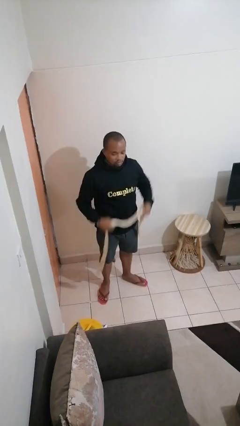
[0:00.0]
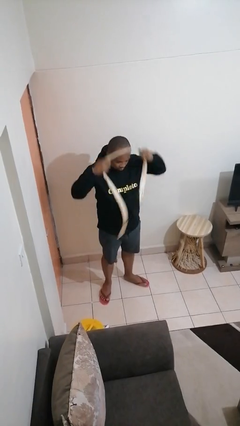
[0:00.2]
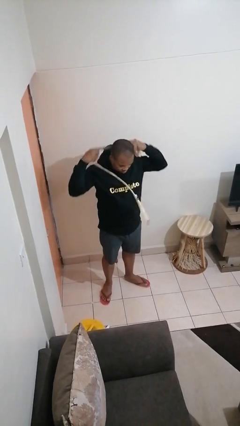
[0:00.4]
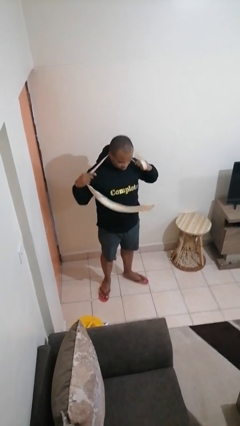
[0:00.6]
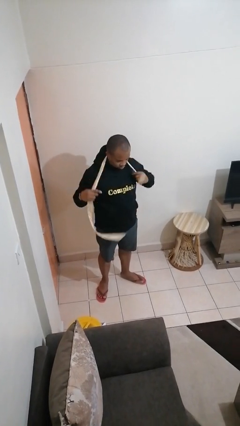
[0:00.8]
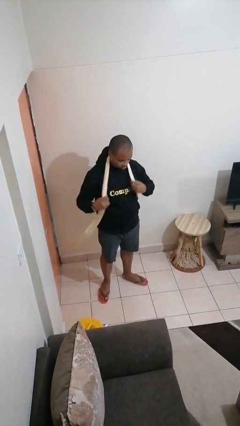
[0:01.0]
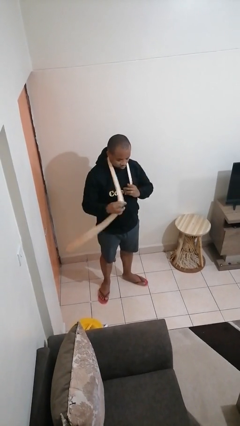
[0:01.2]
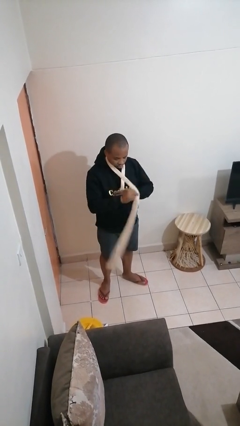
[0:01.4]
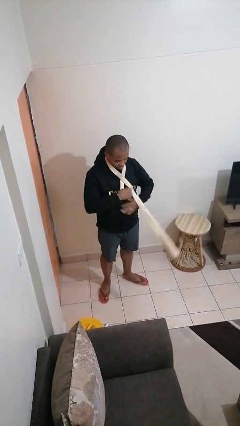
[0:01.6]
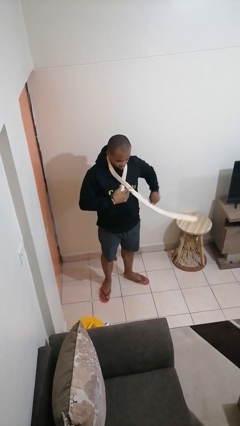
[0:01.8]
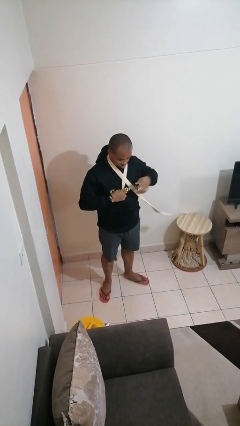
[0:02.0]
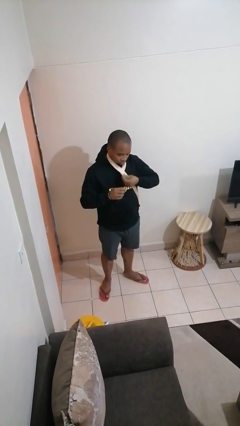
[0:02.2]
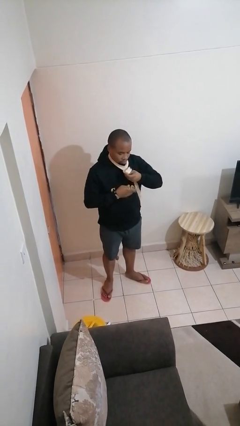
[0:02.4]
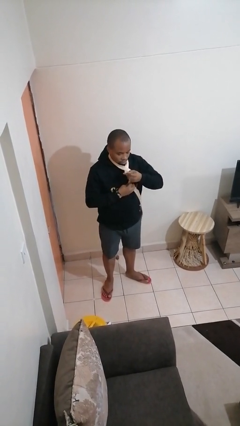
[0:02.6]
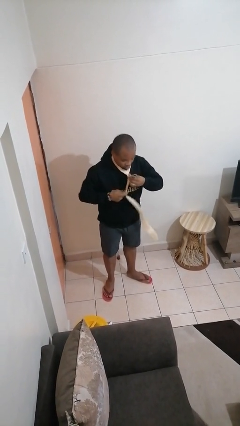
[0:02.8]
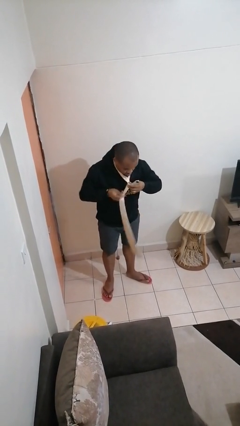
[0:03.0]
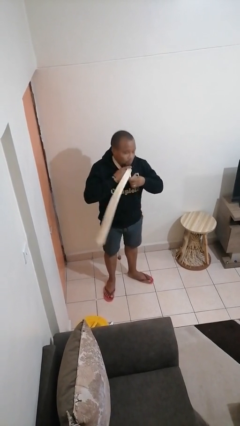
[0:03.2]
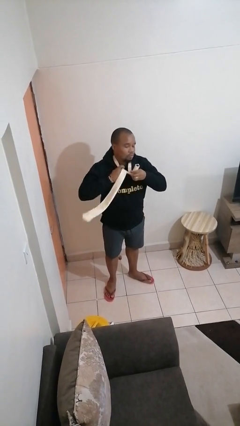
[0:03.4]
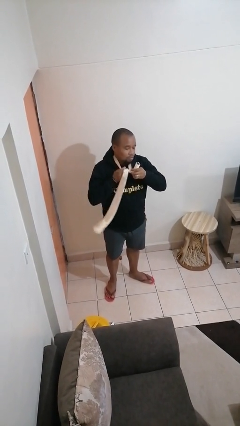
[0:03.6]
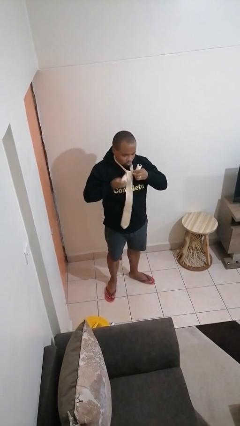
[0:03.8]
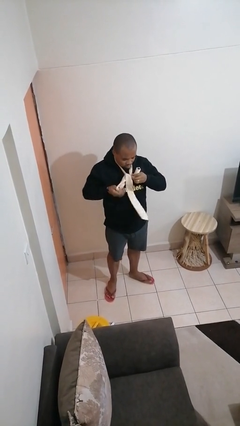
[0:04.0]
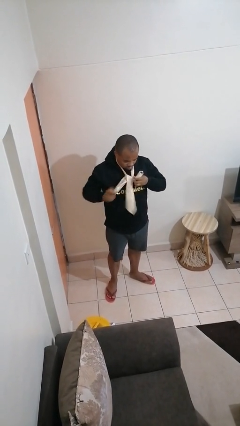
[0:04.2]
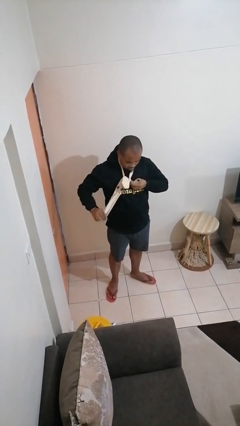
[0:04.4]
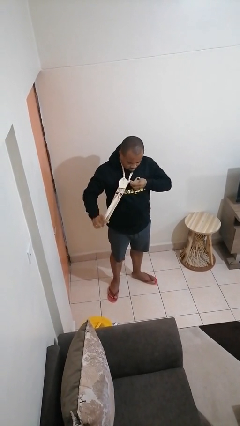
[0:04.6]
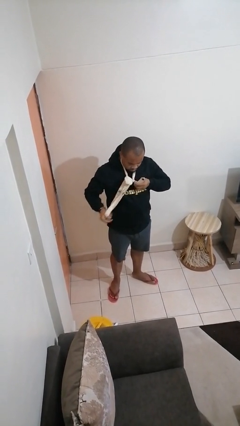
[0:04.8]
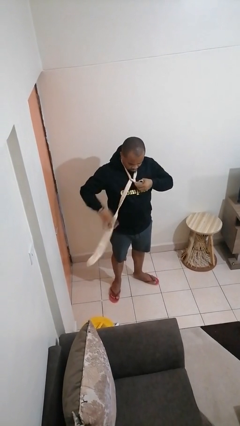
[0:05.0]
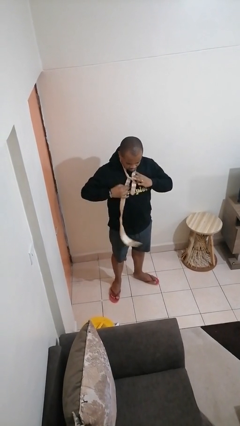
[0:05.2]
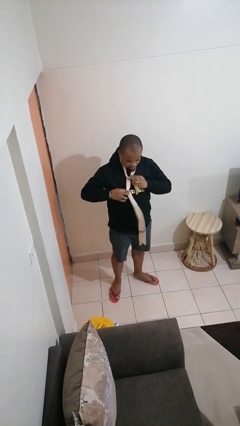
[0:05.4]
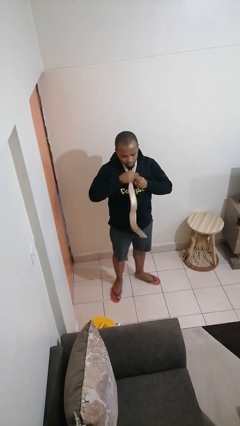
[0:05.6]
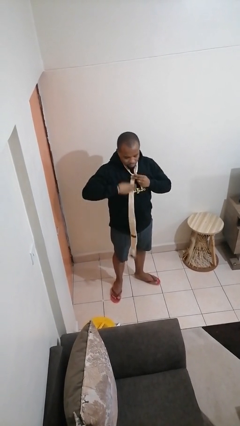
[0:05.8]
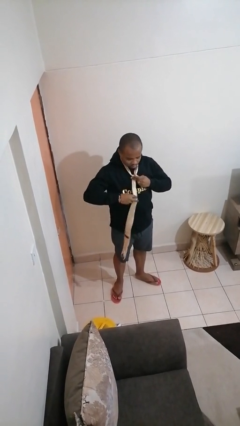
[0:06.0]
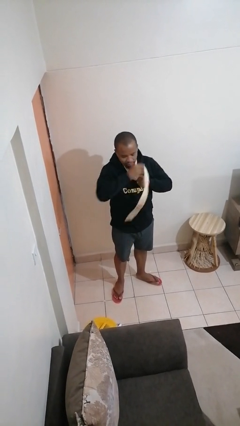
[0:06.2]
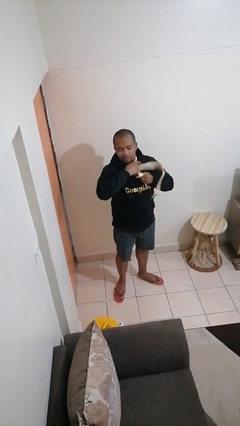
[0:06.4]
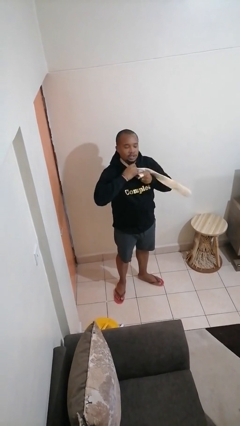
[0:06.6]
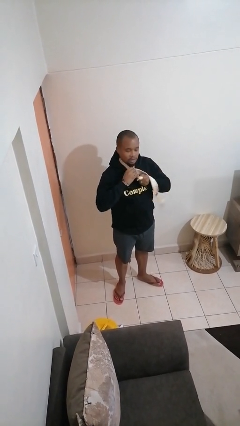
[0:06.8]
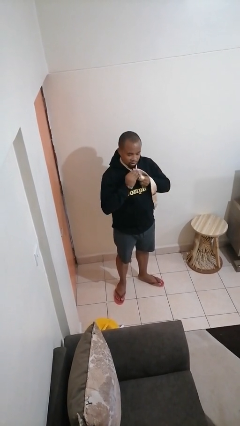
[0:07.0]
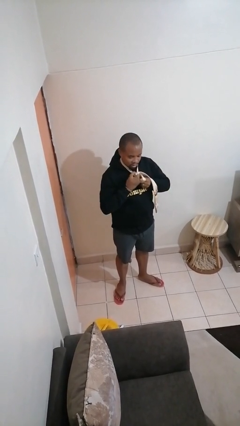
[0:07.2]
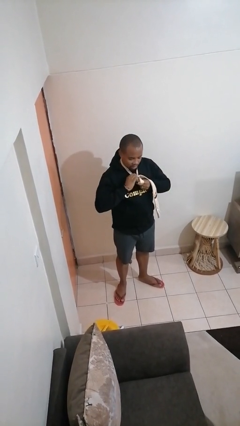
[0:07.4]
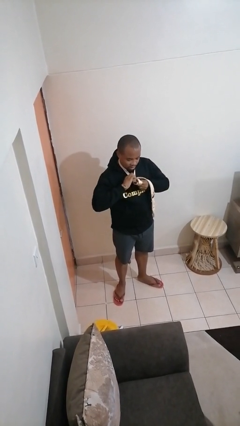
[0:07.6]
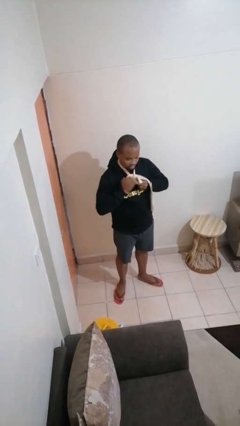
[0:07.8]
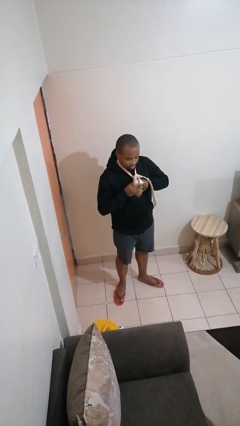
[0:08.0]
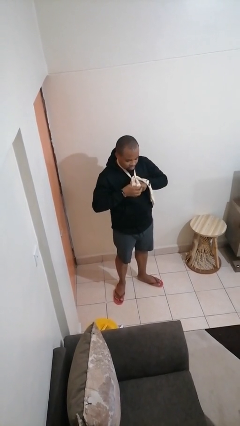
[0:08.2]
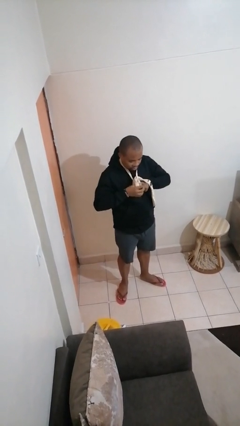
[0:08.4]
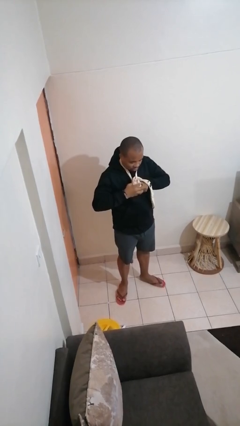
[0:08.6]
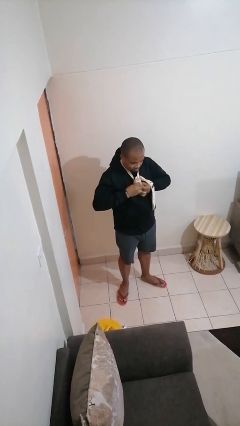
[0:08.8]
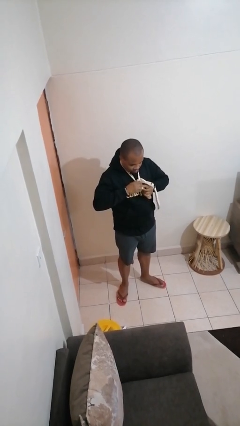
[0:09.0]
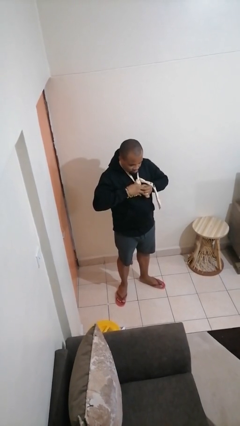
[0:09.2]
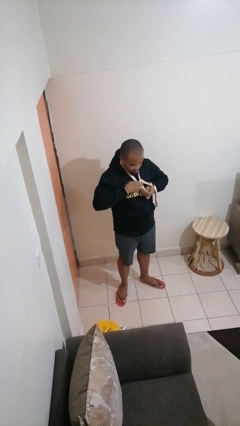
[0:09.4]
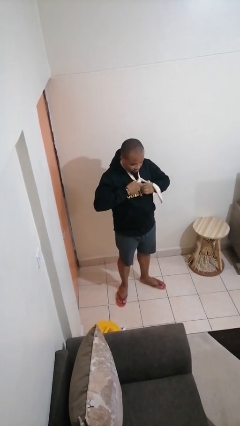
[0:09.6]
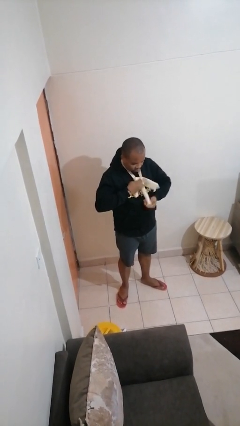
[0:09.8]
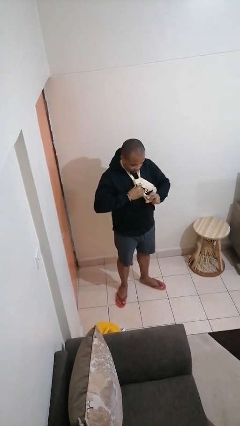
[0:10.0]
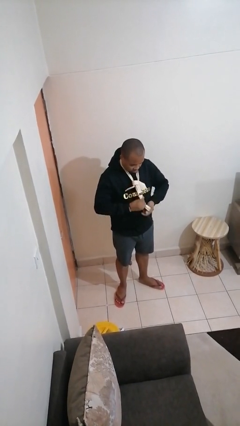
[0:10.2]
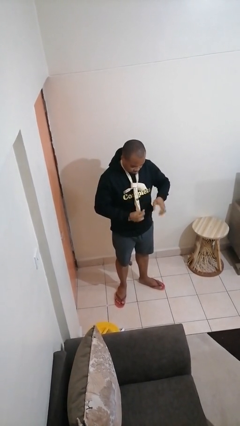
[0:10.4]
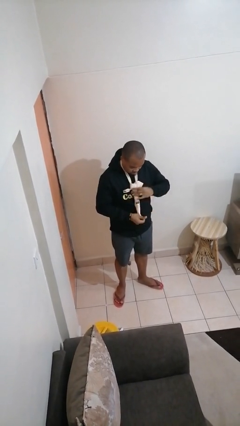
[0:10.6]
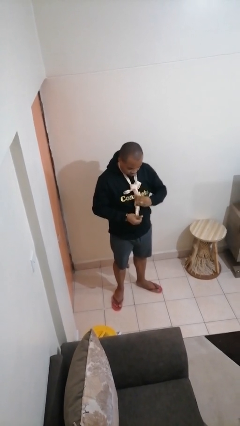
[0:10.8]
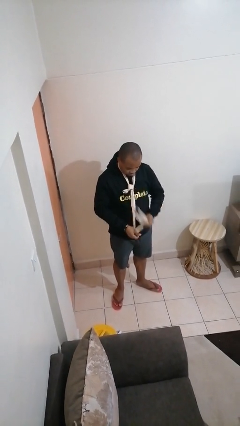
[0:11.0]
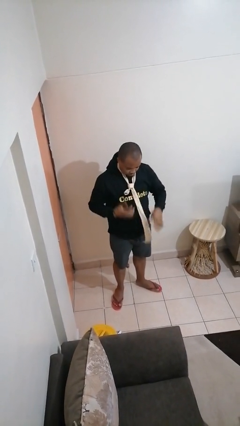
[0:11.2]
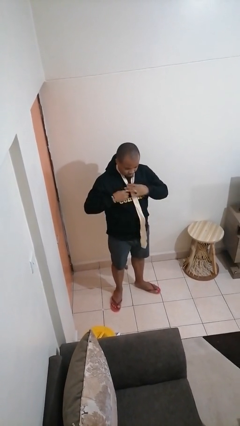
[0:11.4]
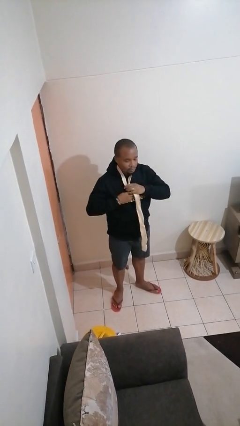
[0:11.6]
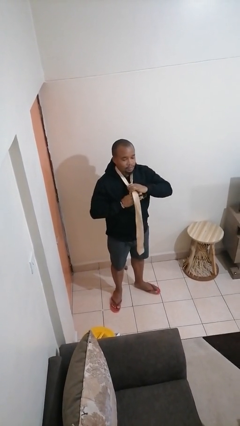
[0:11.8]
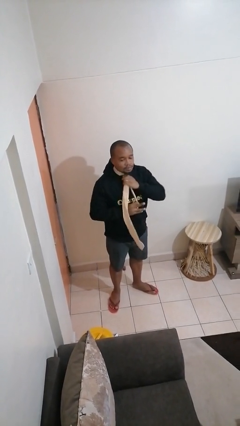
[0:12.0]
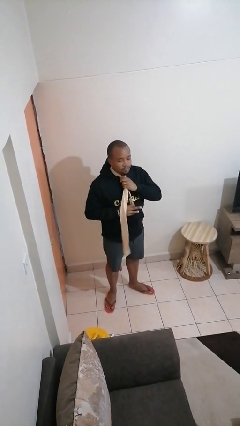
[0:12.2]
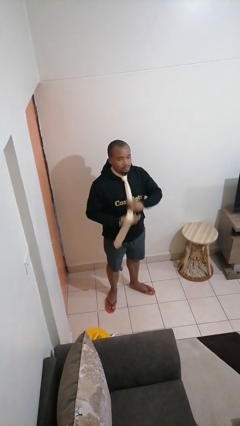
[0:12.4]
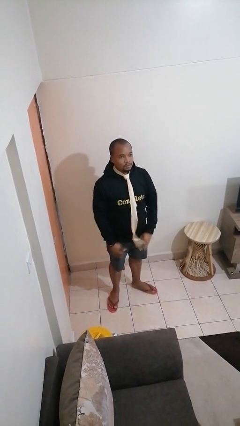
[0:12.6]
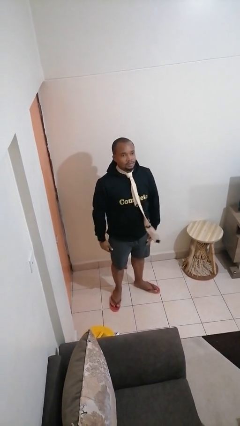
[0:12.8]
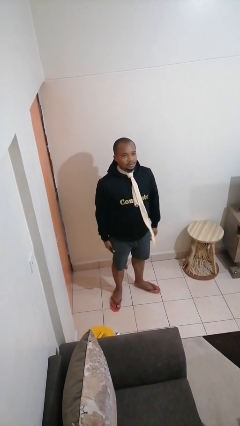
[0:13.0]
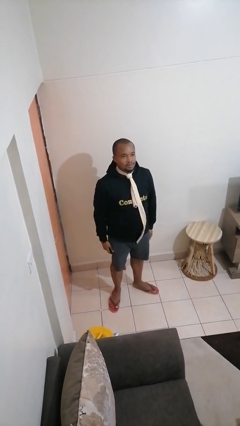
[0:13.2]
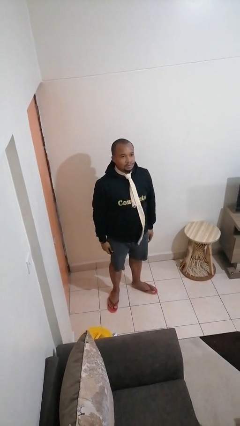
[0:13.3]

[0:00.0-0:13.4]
person puts on necktie

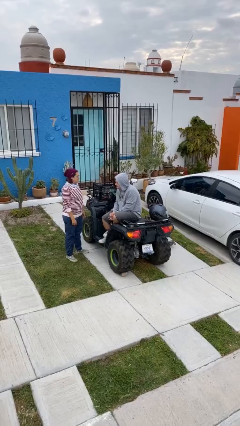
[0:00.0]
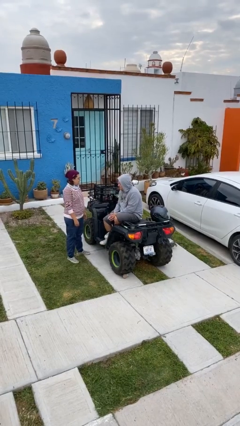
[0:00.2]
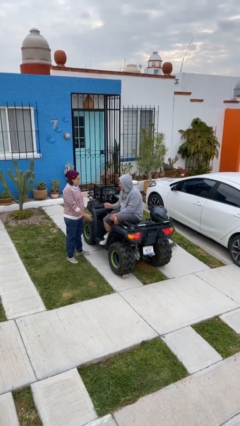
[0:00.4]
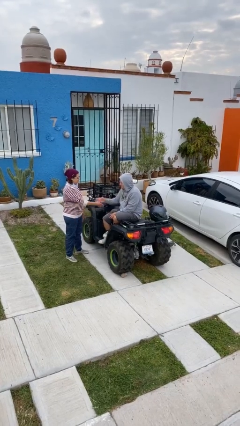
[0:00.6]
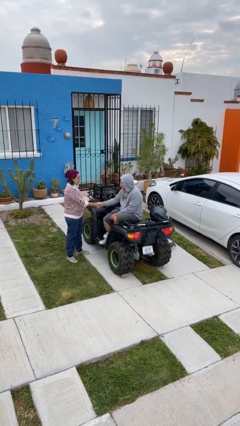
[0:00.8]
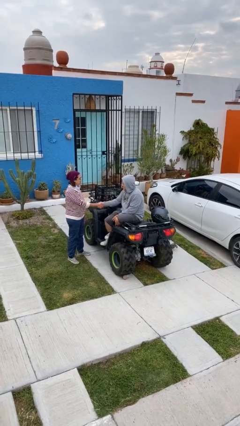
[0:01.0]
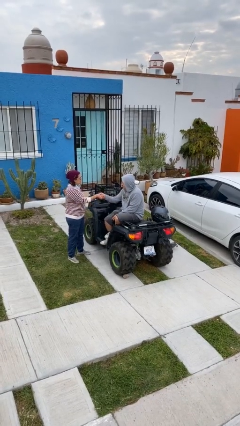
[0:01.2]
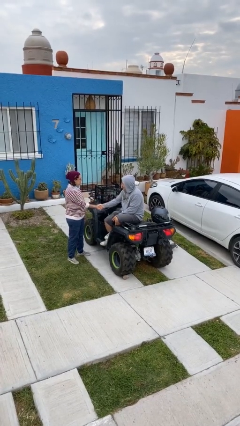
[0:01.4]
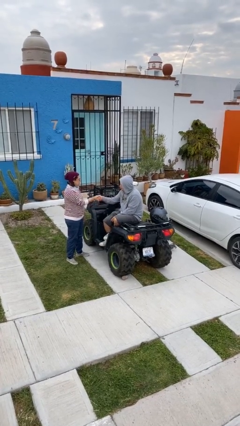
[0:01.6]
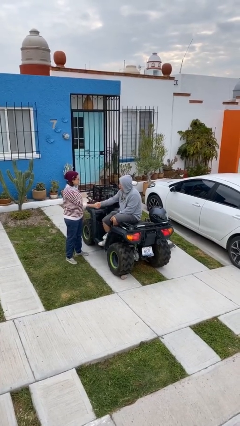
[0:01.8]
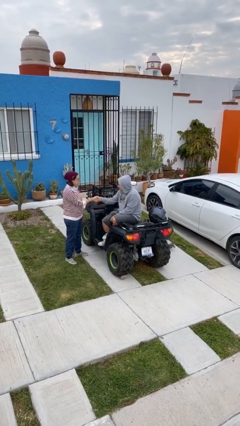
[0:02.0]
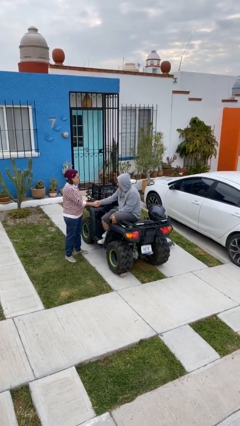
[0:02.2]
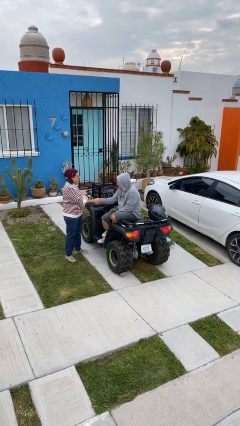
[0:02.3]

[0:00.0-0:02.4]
person shakes hand

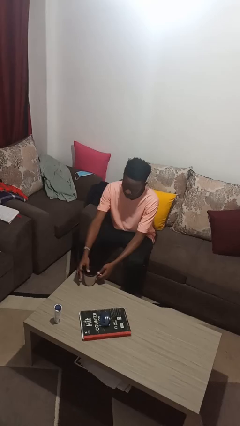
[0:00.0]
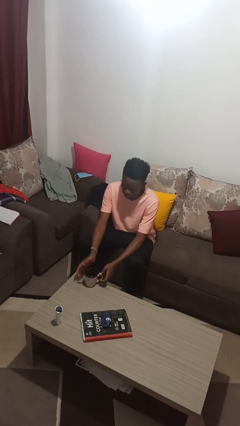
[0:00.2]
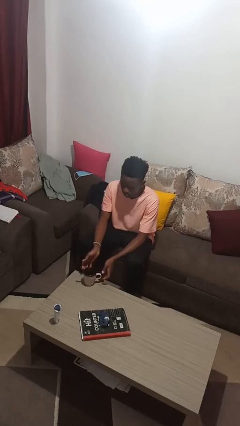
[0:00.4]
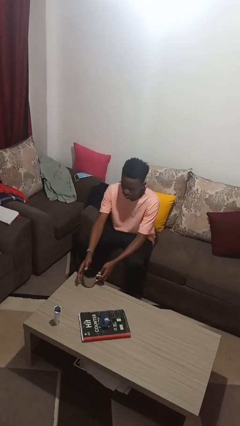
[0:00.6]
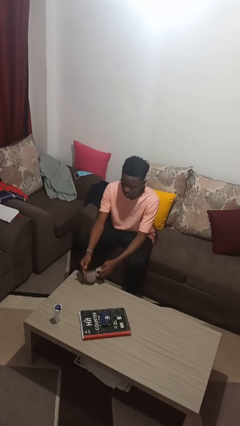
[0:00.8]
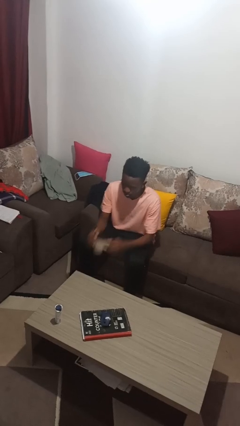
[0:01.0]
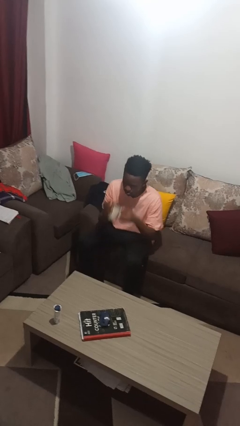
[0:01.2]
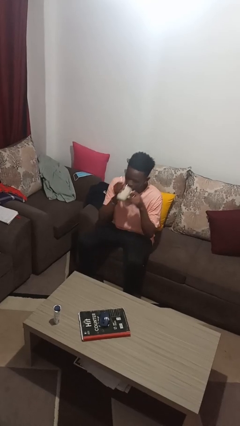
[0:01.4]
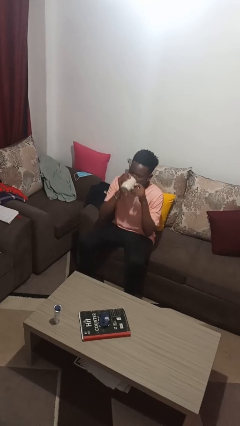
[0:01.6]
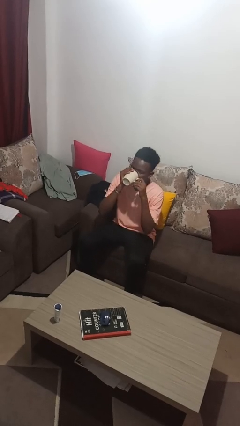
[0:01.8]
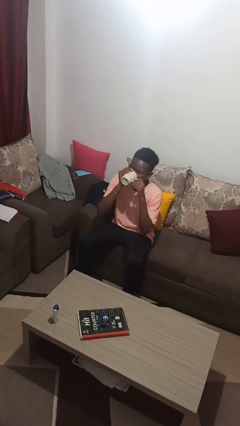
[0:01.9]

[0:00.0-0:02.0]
person drinks from mug

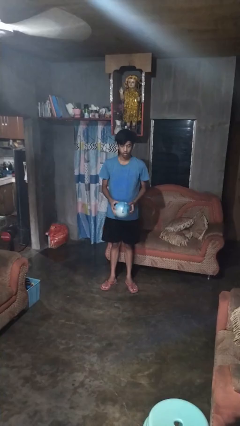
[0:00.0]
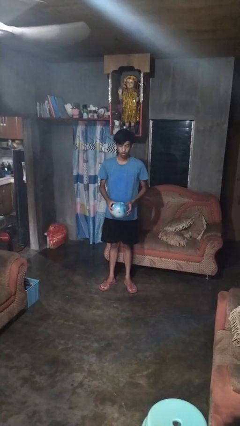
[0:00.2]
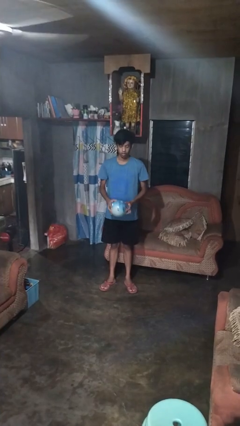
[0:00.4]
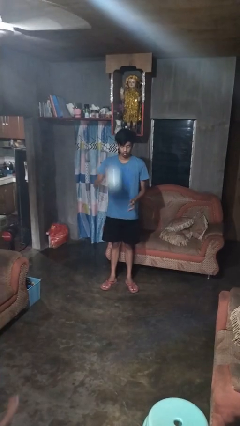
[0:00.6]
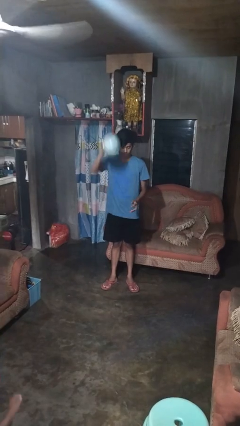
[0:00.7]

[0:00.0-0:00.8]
person bounces ball on floor
